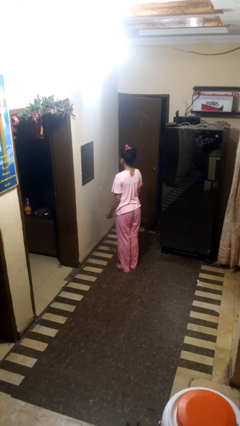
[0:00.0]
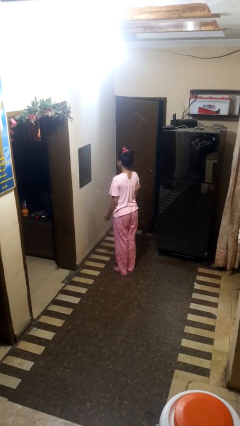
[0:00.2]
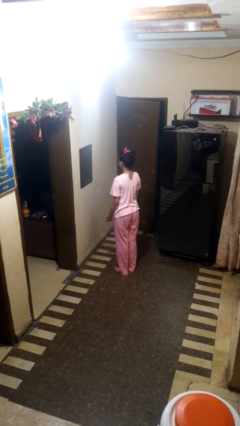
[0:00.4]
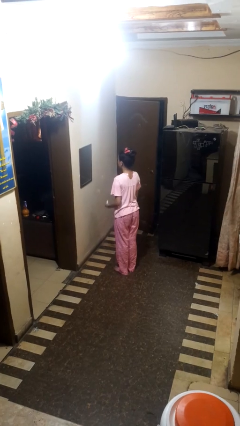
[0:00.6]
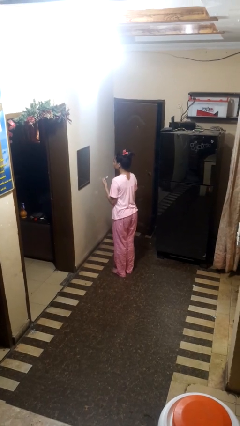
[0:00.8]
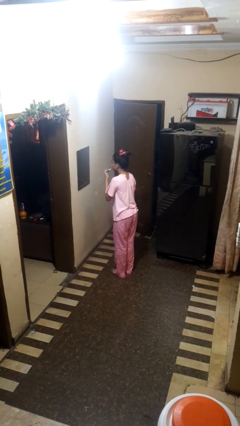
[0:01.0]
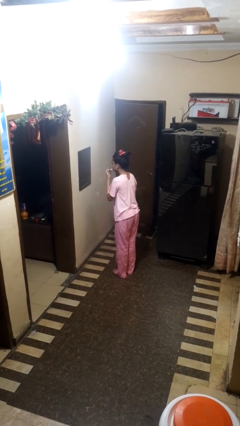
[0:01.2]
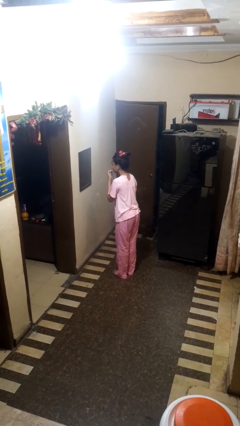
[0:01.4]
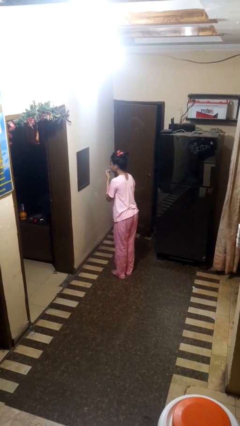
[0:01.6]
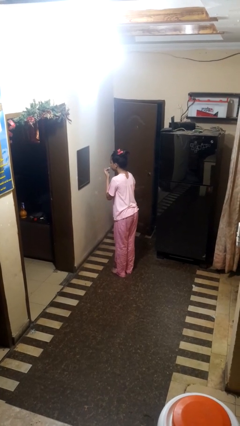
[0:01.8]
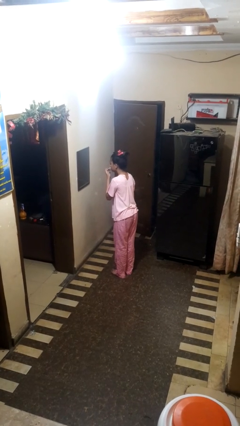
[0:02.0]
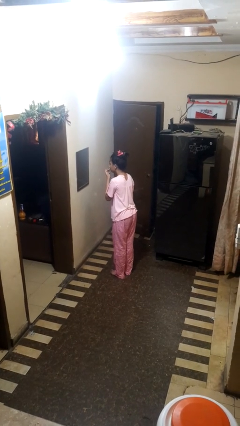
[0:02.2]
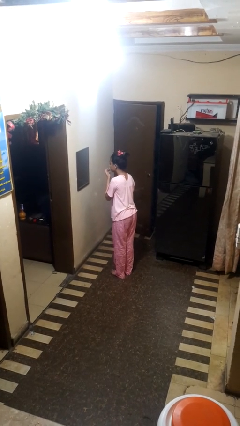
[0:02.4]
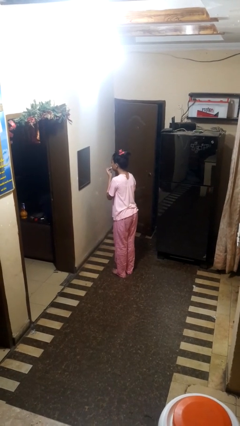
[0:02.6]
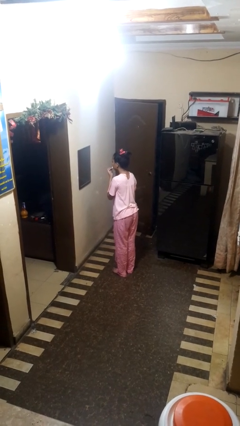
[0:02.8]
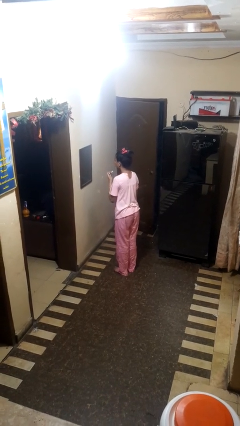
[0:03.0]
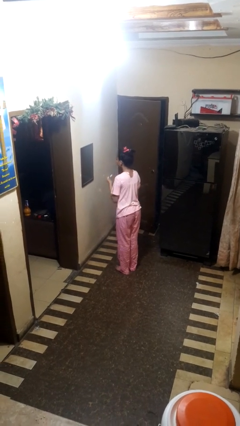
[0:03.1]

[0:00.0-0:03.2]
person applies lip makeup

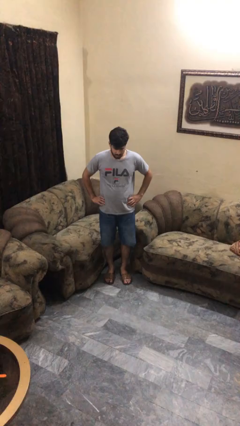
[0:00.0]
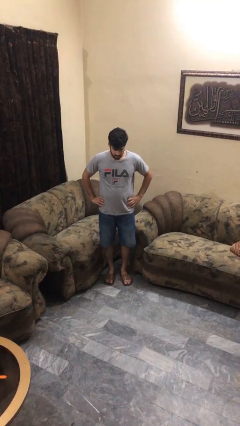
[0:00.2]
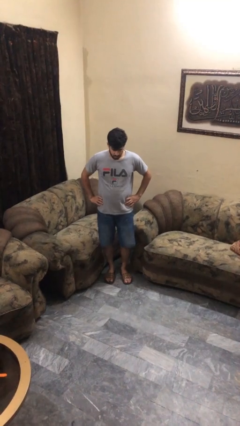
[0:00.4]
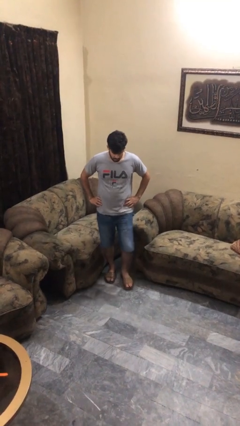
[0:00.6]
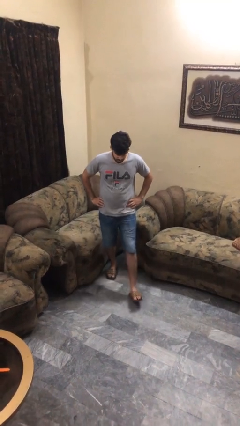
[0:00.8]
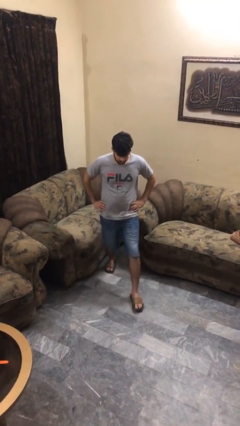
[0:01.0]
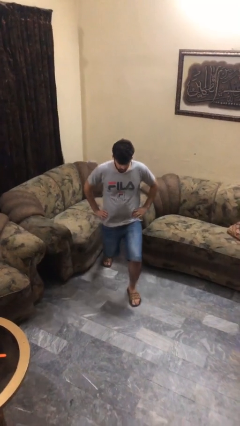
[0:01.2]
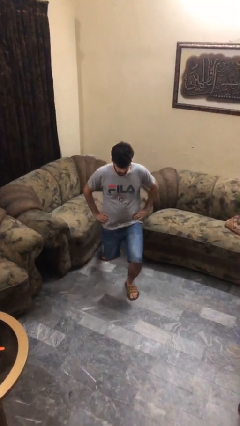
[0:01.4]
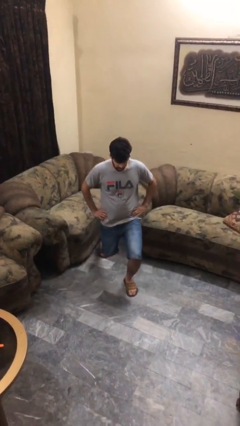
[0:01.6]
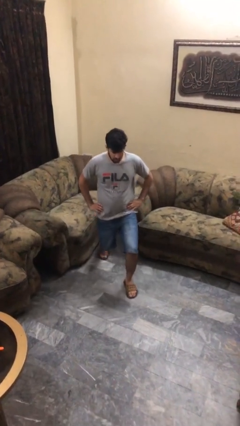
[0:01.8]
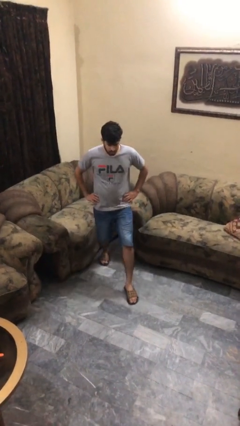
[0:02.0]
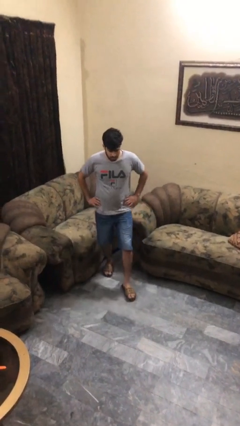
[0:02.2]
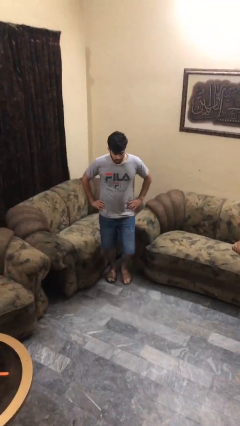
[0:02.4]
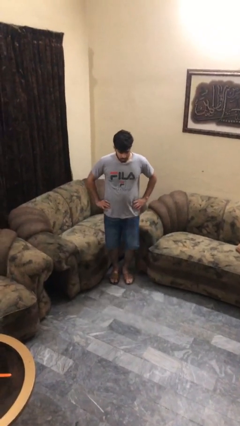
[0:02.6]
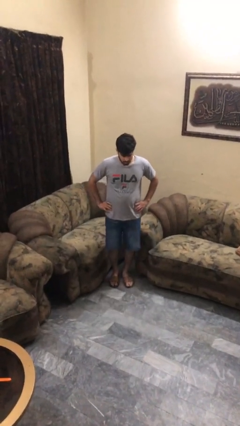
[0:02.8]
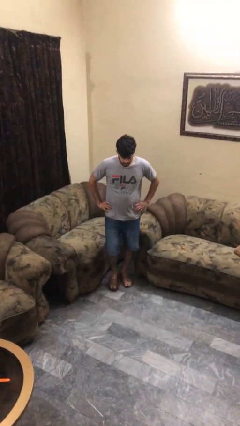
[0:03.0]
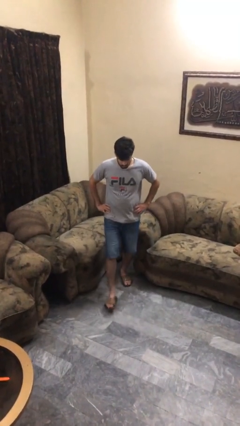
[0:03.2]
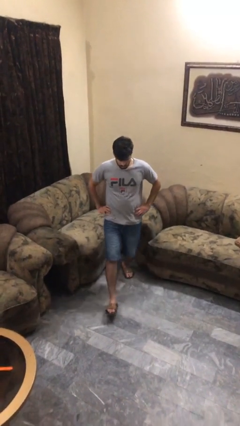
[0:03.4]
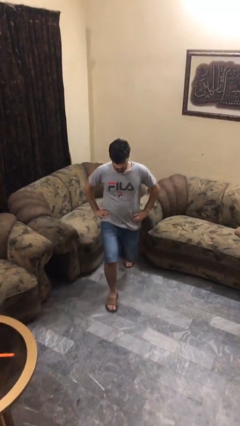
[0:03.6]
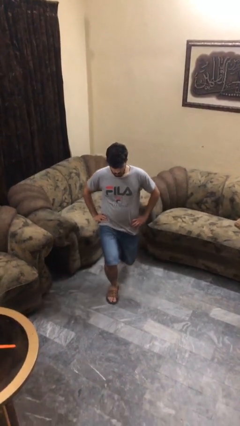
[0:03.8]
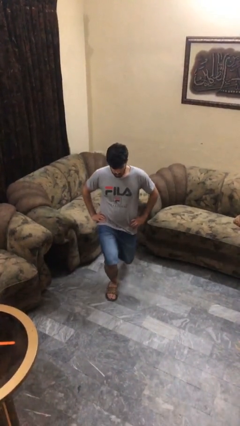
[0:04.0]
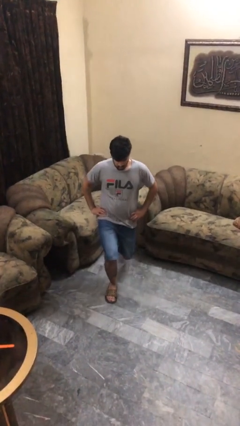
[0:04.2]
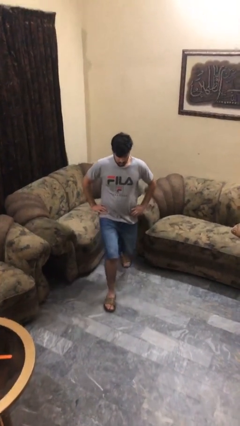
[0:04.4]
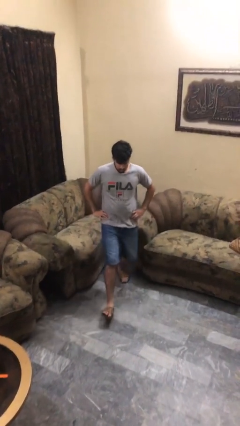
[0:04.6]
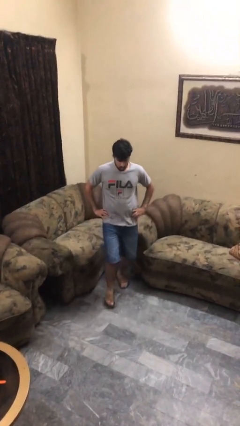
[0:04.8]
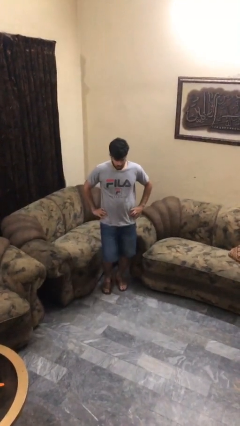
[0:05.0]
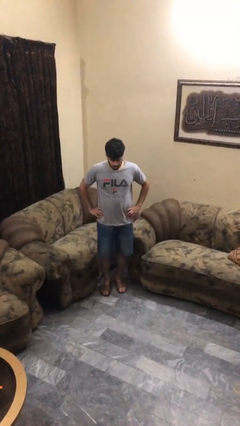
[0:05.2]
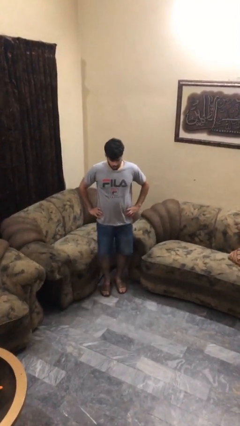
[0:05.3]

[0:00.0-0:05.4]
person exercises with lunges

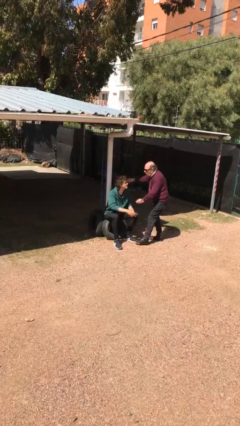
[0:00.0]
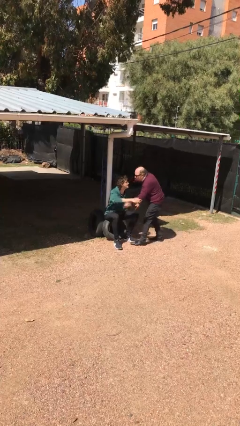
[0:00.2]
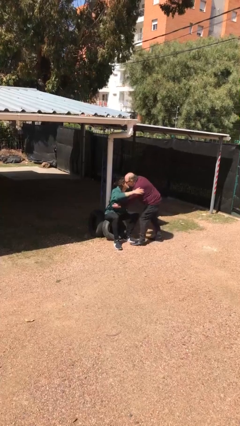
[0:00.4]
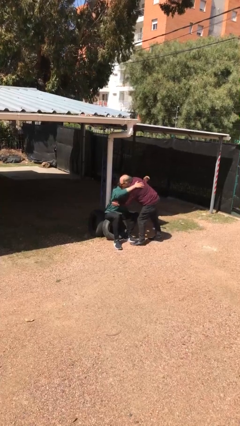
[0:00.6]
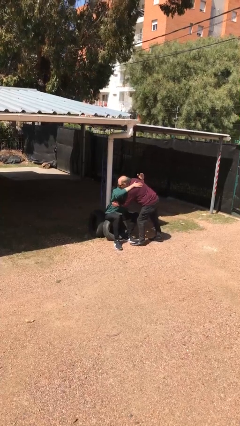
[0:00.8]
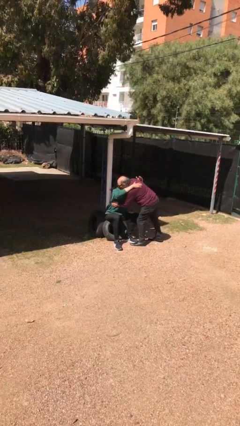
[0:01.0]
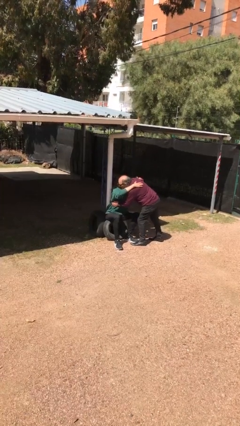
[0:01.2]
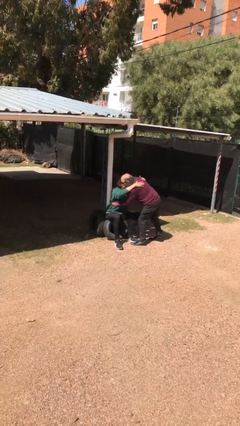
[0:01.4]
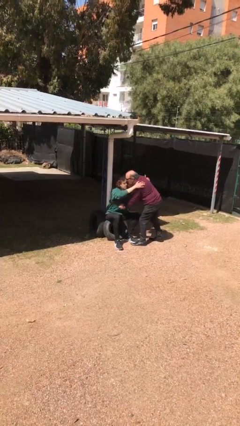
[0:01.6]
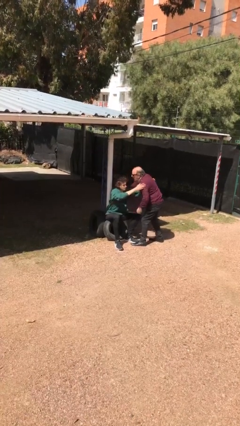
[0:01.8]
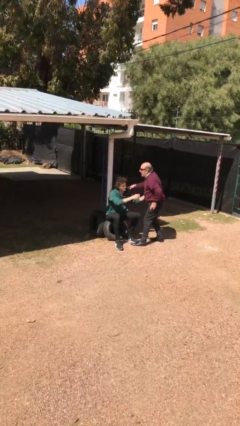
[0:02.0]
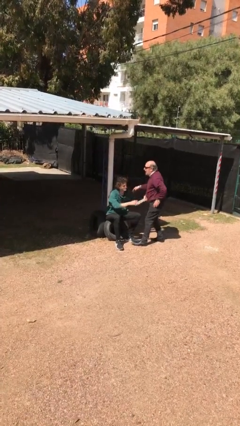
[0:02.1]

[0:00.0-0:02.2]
person embraces person

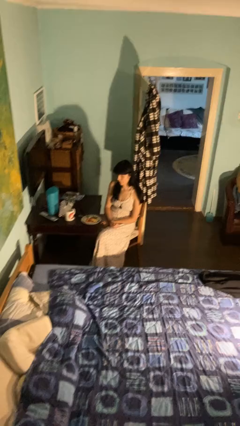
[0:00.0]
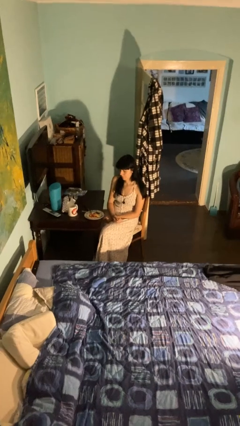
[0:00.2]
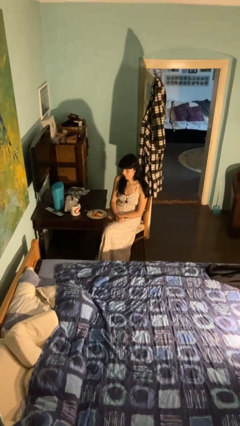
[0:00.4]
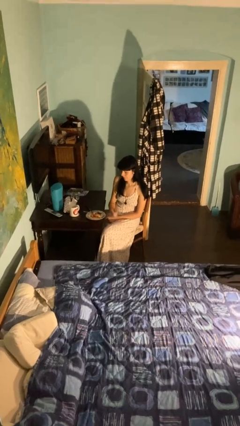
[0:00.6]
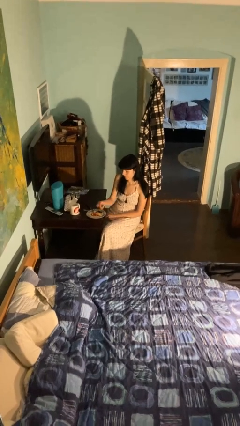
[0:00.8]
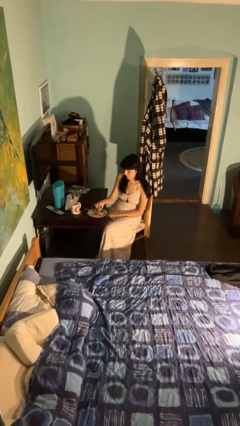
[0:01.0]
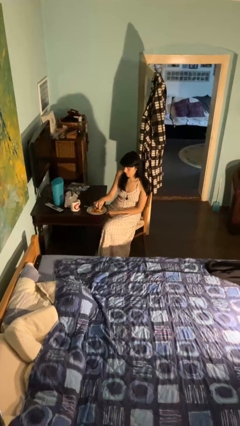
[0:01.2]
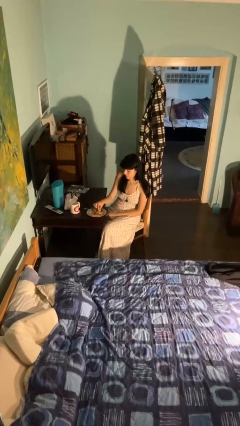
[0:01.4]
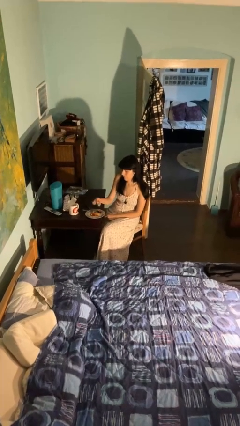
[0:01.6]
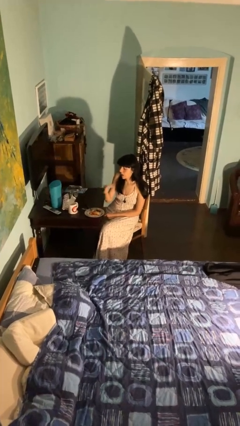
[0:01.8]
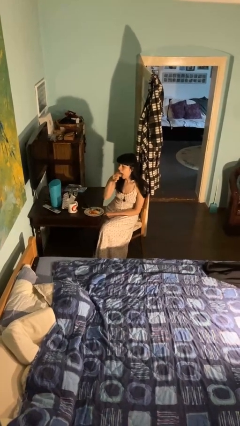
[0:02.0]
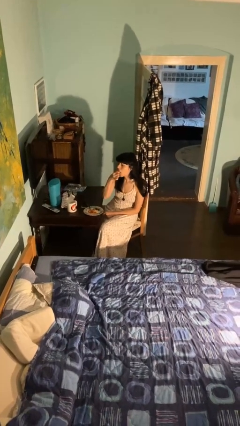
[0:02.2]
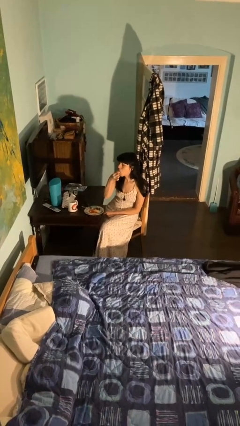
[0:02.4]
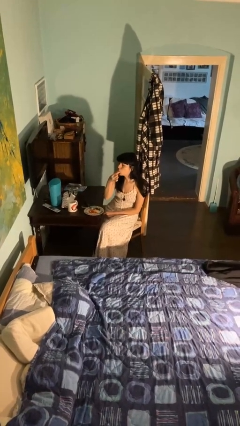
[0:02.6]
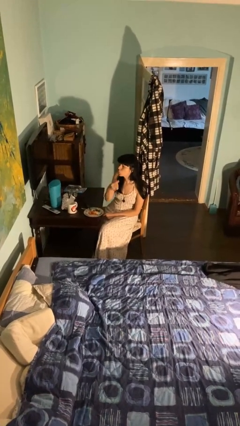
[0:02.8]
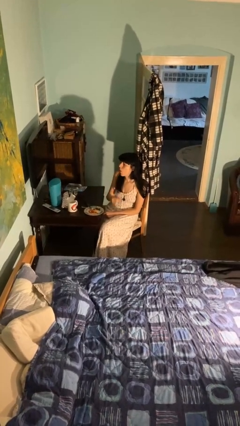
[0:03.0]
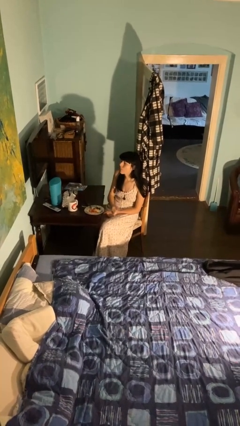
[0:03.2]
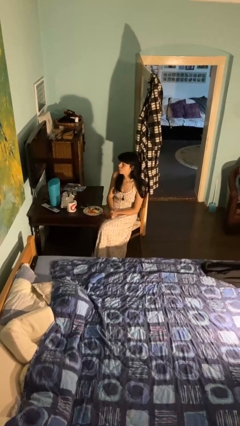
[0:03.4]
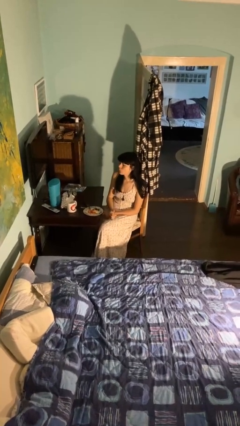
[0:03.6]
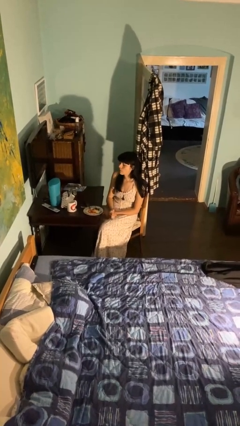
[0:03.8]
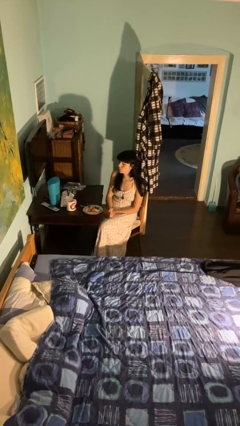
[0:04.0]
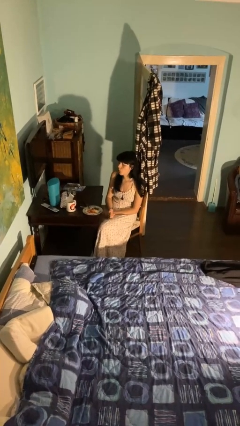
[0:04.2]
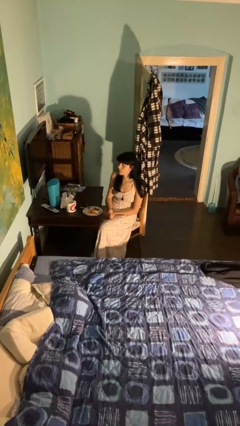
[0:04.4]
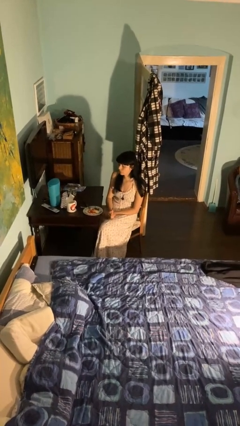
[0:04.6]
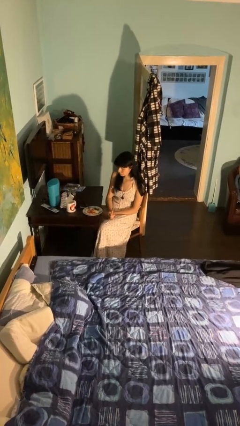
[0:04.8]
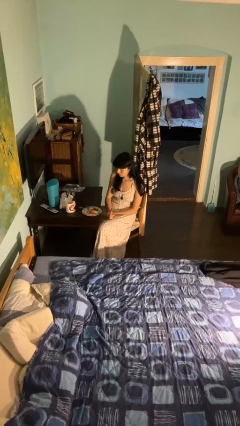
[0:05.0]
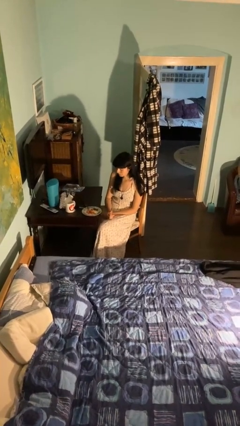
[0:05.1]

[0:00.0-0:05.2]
person eats with hands

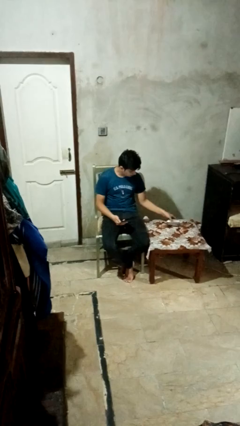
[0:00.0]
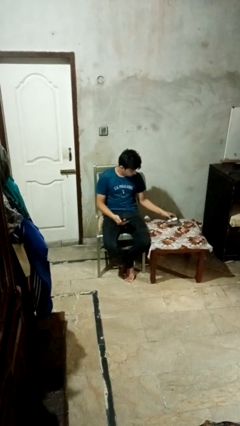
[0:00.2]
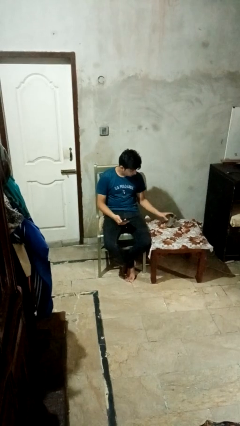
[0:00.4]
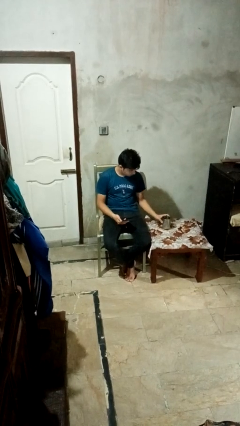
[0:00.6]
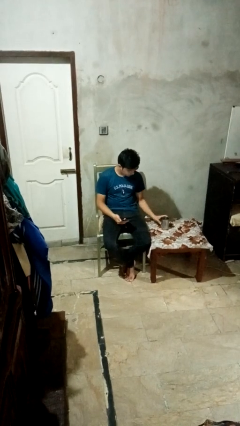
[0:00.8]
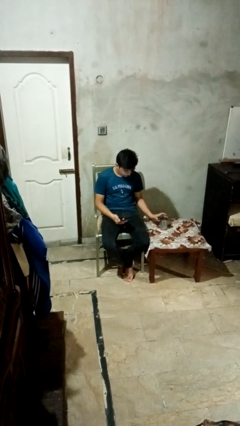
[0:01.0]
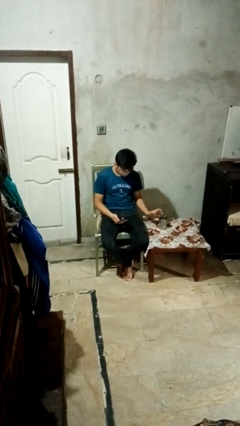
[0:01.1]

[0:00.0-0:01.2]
person sets upright glass

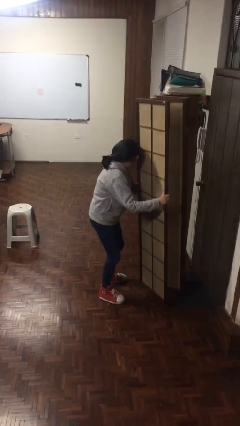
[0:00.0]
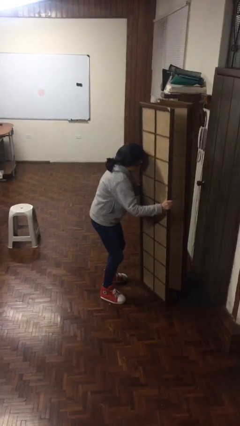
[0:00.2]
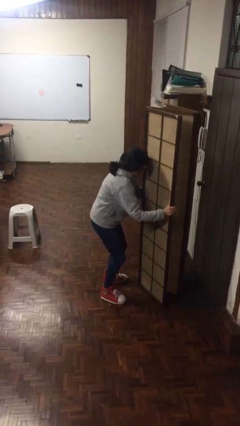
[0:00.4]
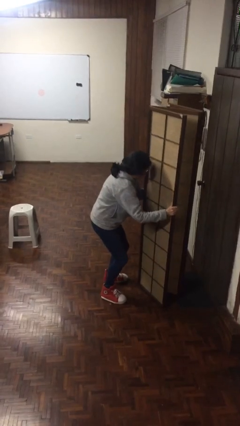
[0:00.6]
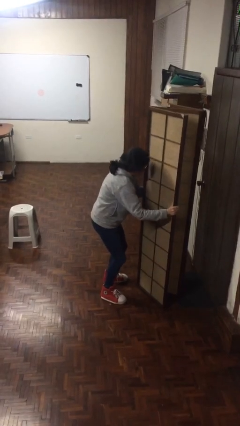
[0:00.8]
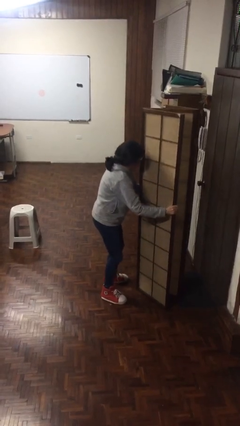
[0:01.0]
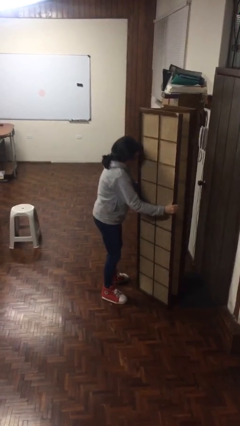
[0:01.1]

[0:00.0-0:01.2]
person puts down object on floor
